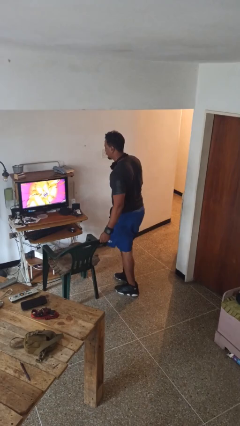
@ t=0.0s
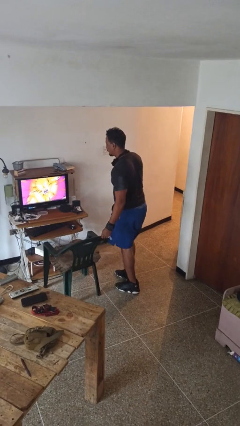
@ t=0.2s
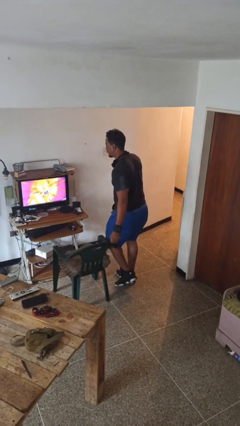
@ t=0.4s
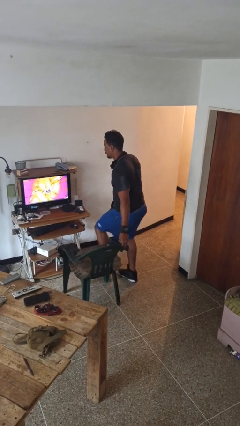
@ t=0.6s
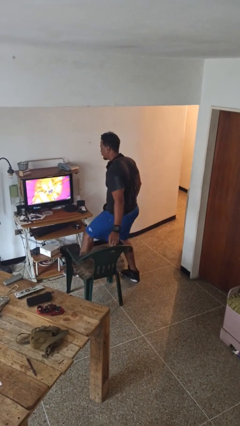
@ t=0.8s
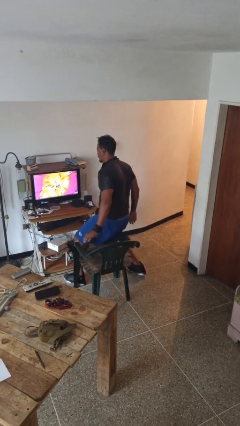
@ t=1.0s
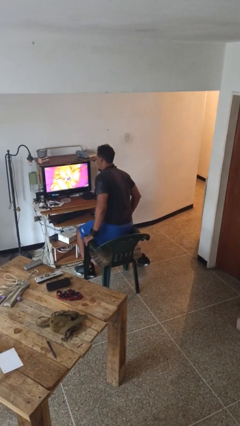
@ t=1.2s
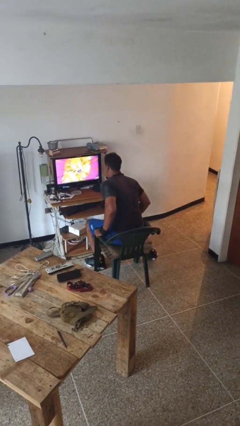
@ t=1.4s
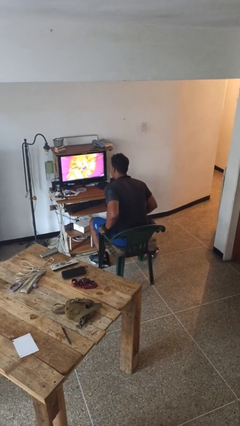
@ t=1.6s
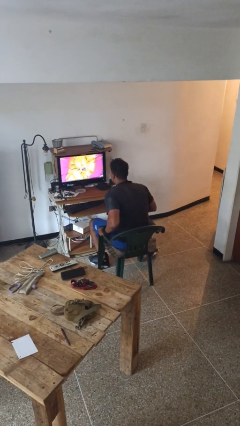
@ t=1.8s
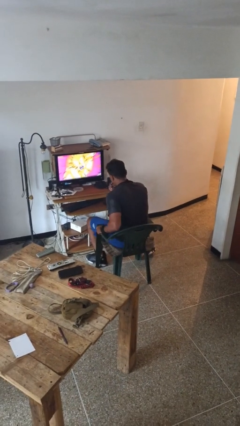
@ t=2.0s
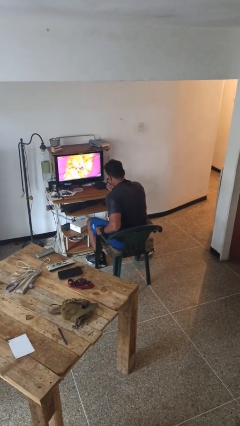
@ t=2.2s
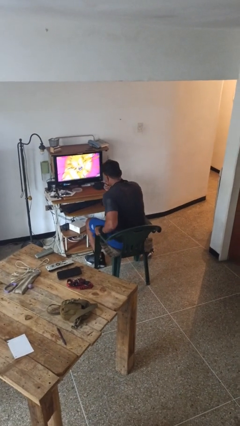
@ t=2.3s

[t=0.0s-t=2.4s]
person sits down

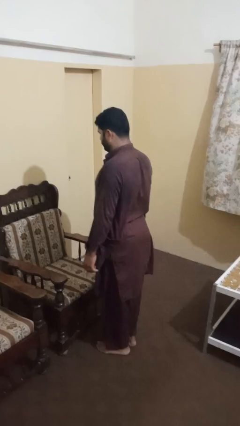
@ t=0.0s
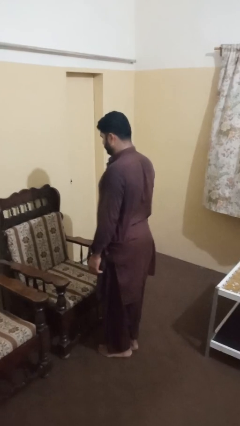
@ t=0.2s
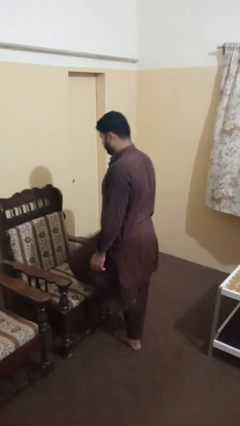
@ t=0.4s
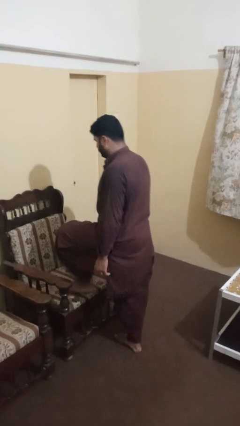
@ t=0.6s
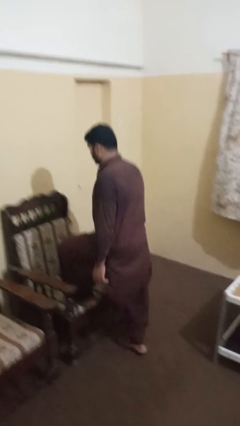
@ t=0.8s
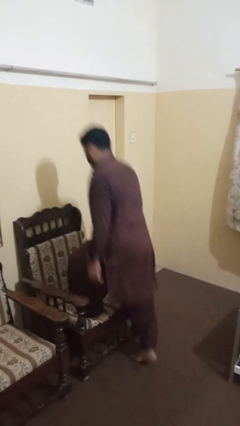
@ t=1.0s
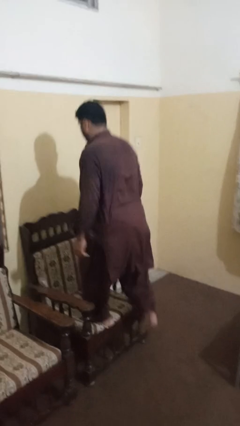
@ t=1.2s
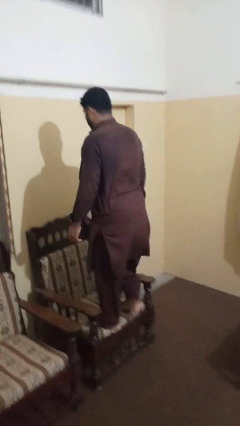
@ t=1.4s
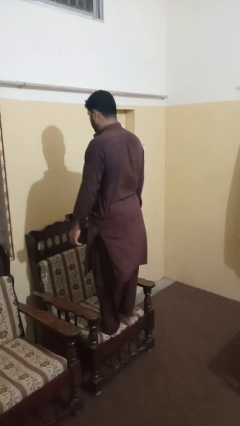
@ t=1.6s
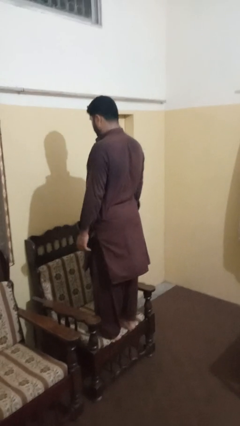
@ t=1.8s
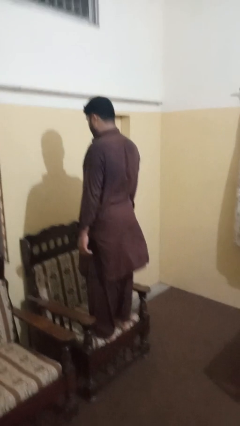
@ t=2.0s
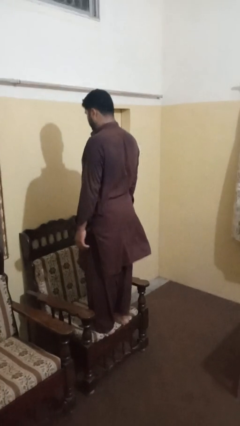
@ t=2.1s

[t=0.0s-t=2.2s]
person climbs on chair

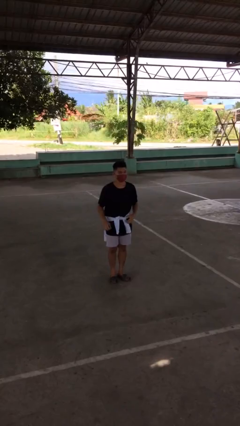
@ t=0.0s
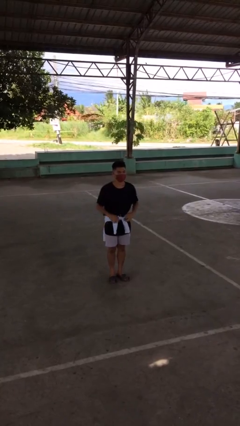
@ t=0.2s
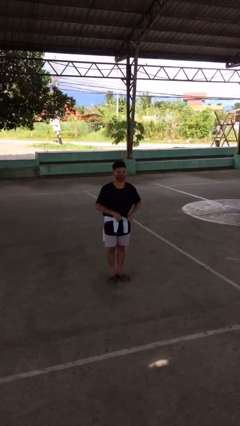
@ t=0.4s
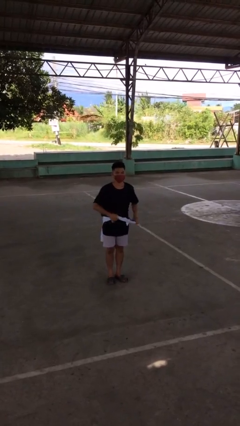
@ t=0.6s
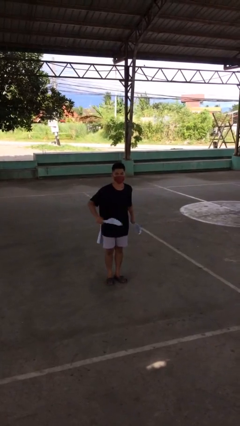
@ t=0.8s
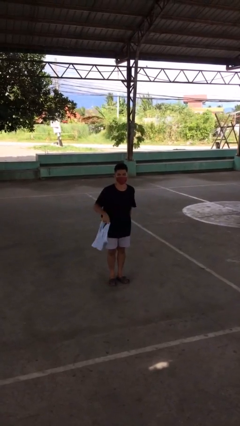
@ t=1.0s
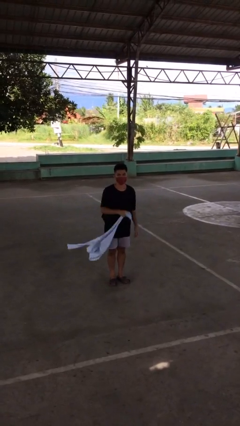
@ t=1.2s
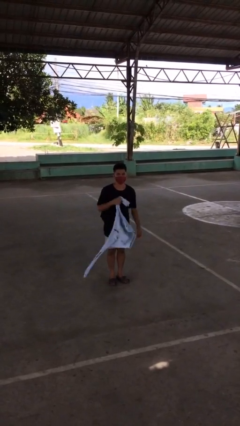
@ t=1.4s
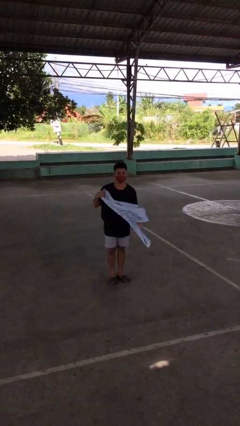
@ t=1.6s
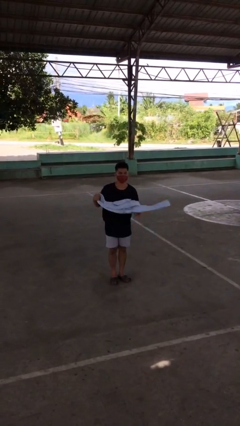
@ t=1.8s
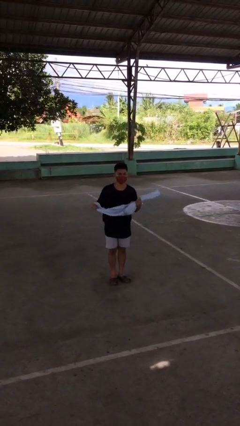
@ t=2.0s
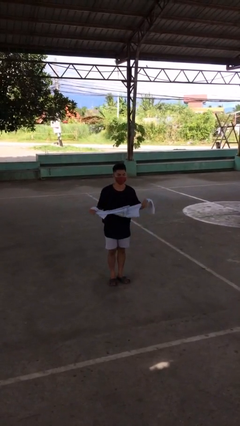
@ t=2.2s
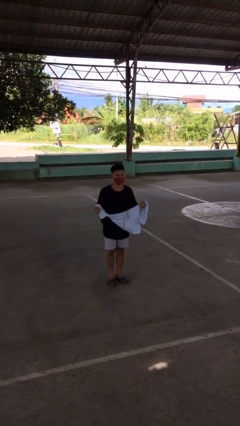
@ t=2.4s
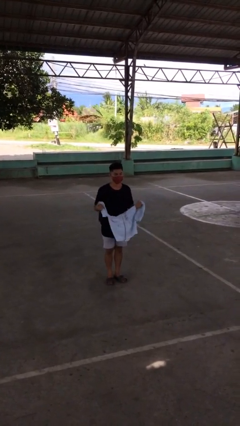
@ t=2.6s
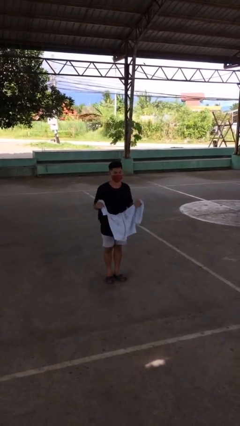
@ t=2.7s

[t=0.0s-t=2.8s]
person unties jacket around waist

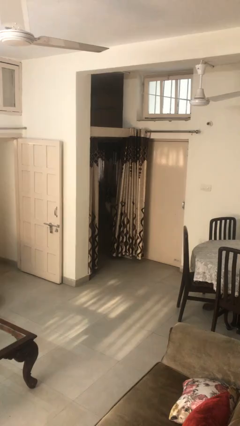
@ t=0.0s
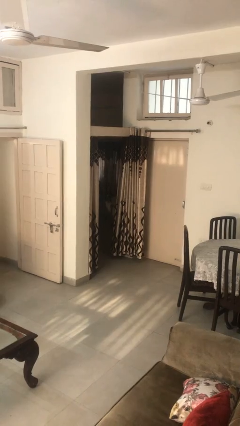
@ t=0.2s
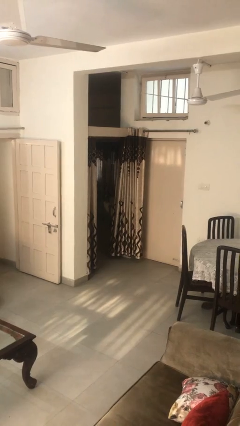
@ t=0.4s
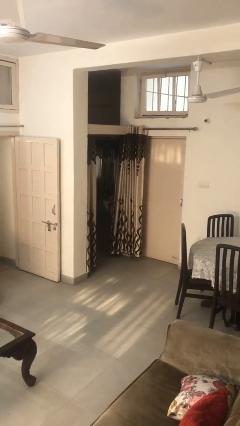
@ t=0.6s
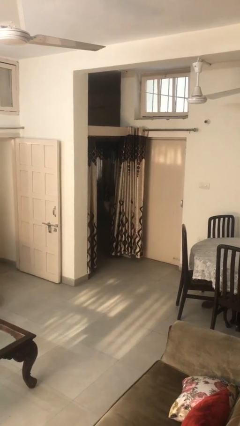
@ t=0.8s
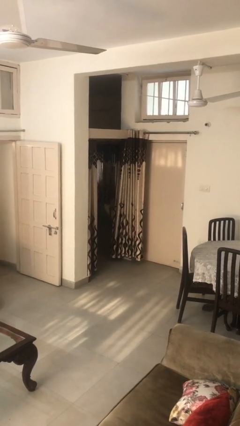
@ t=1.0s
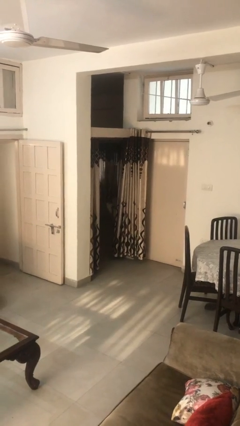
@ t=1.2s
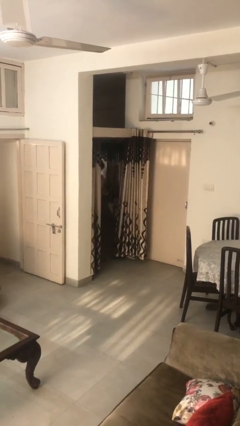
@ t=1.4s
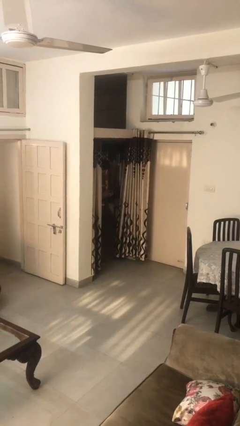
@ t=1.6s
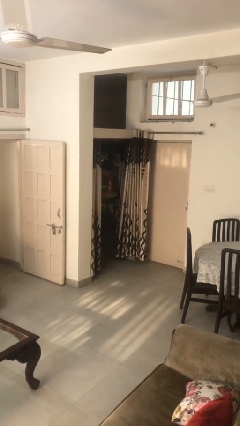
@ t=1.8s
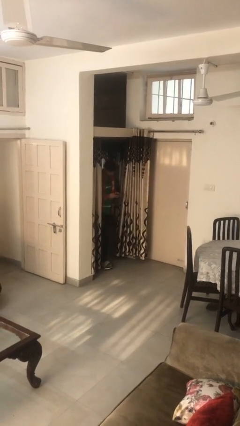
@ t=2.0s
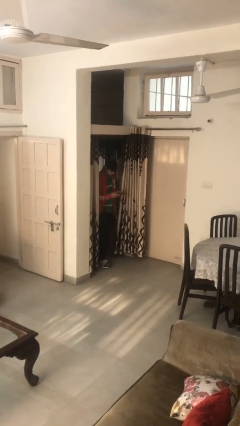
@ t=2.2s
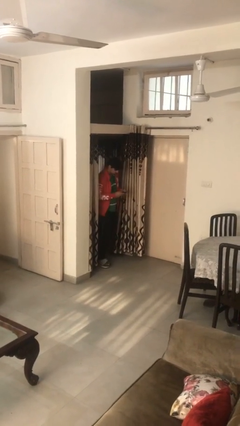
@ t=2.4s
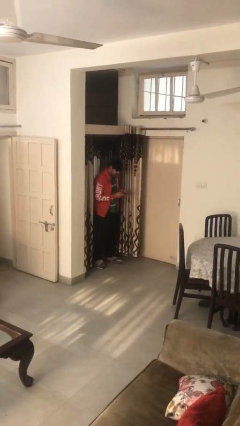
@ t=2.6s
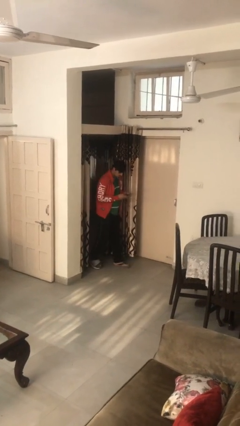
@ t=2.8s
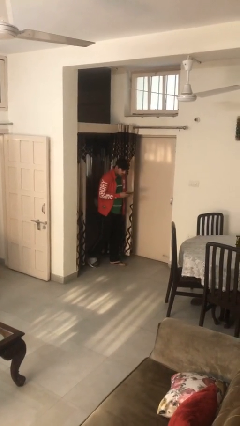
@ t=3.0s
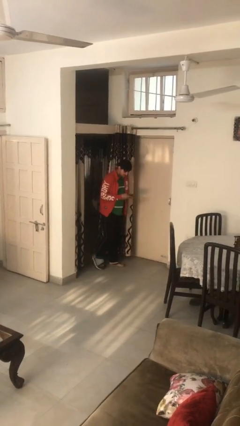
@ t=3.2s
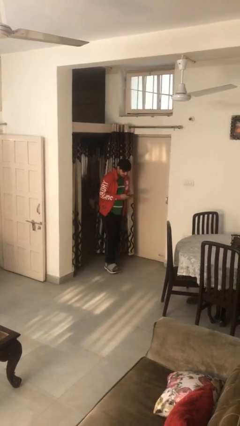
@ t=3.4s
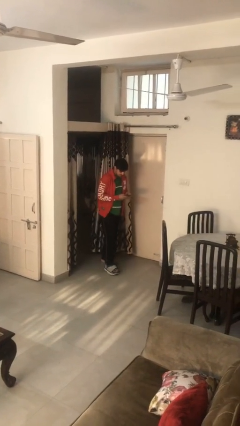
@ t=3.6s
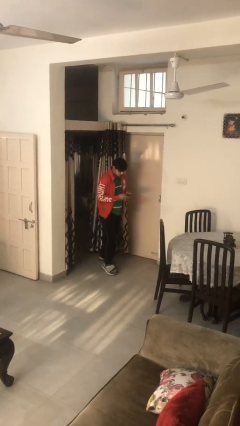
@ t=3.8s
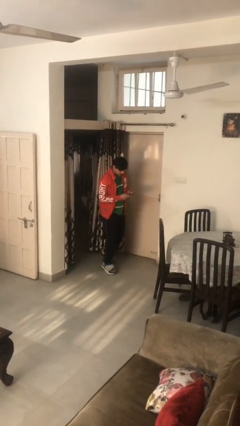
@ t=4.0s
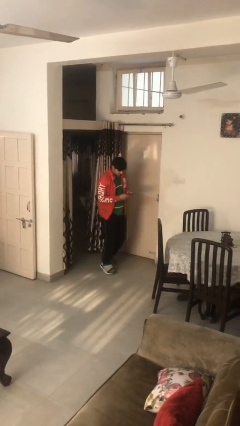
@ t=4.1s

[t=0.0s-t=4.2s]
person enters scene through structure

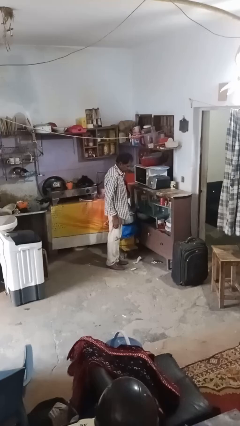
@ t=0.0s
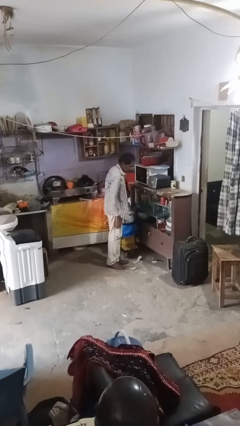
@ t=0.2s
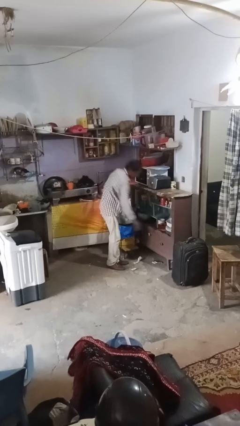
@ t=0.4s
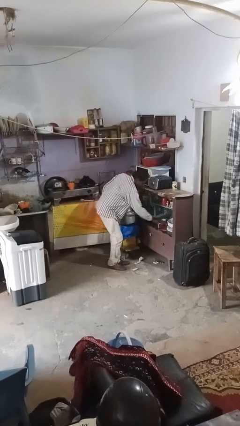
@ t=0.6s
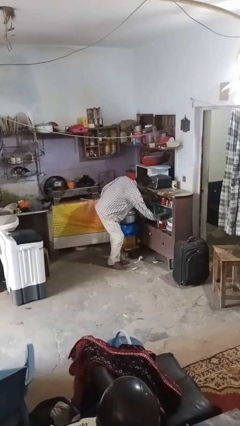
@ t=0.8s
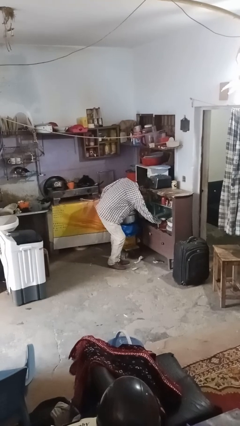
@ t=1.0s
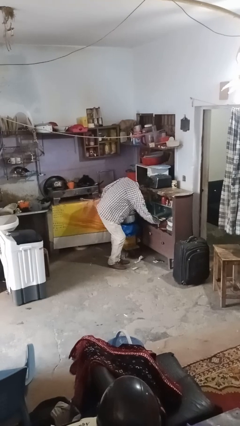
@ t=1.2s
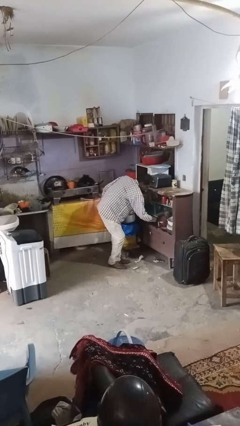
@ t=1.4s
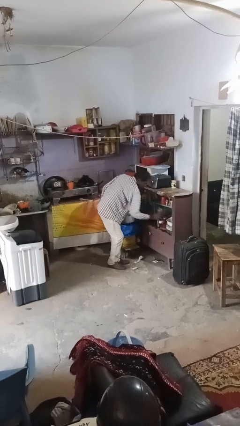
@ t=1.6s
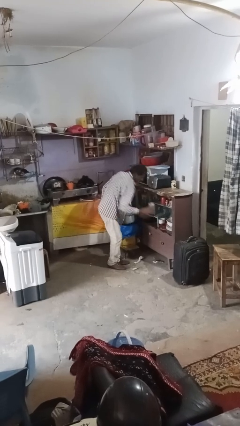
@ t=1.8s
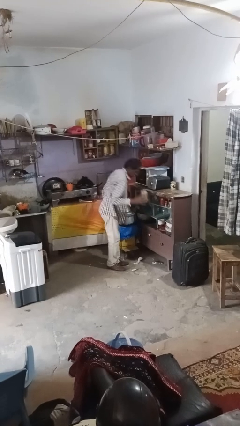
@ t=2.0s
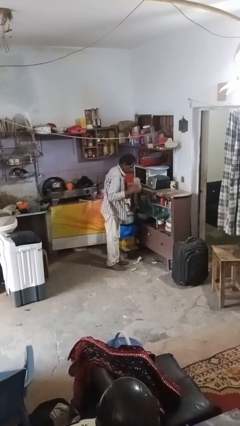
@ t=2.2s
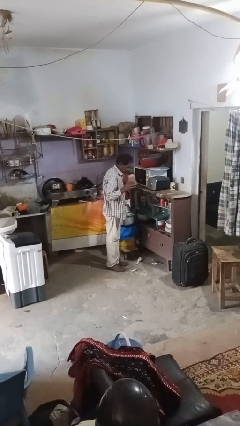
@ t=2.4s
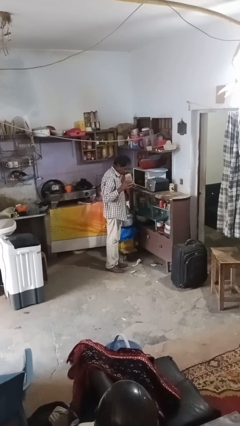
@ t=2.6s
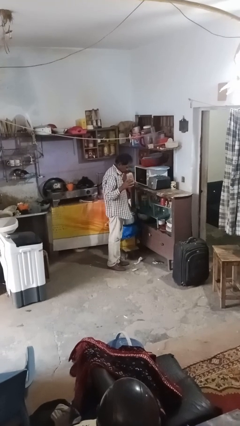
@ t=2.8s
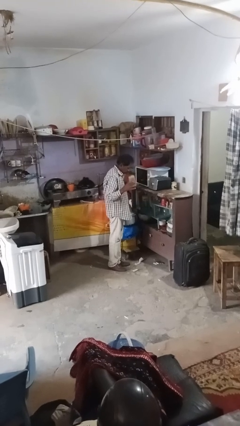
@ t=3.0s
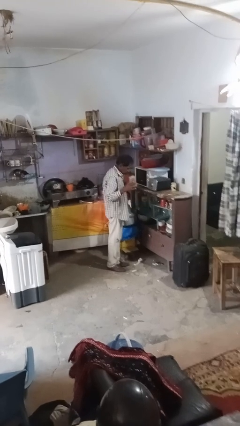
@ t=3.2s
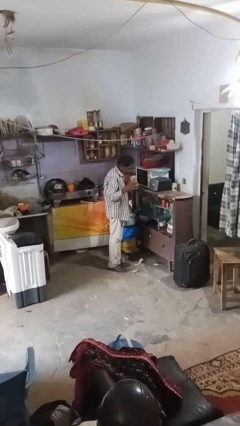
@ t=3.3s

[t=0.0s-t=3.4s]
person takes object from kitchen drawer

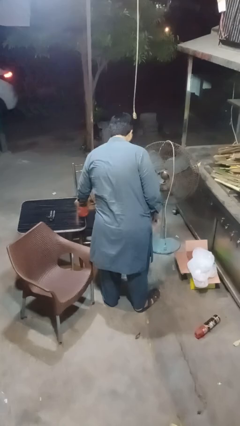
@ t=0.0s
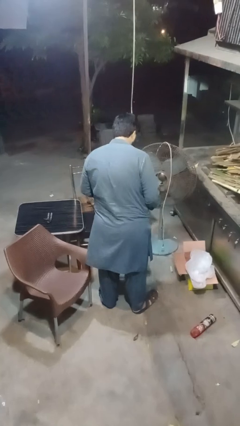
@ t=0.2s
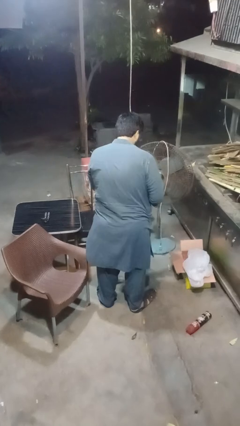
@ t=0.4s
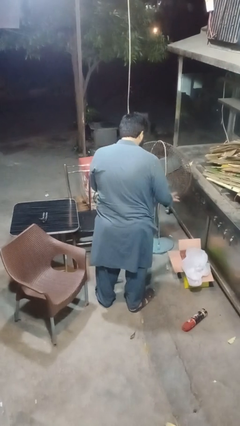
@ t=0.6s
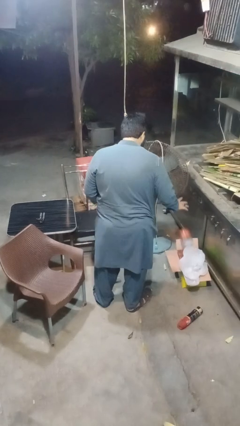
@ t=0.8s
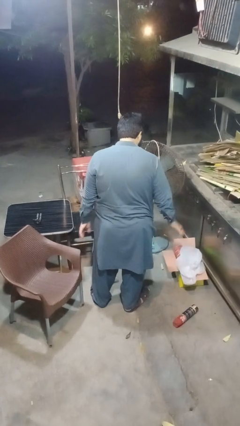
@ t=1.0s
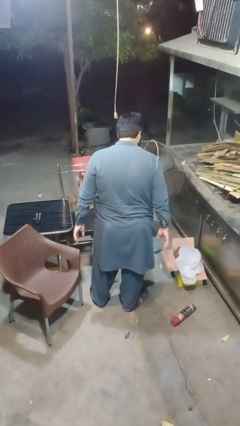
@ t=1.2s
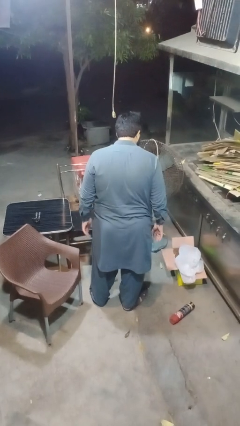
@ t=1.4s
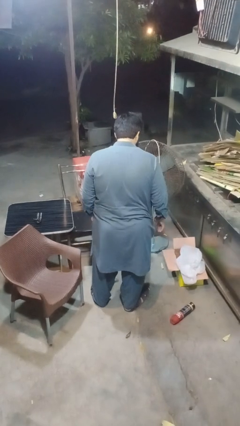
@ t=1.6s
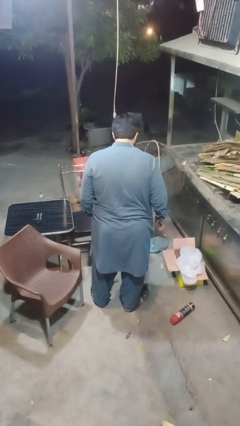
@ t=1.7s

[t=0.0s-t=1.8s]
person discards trash

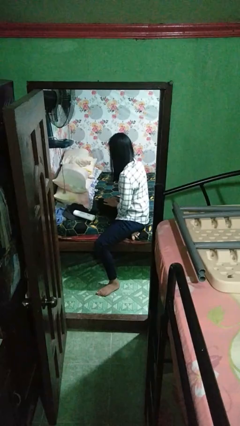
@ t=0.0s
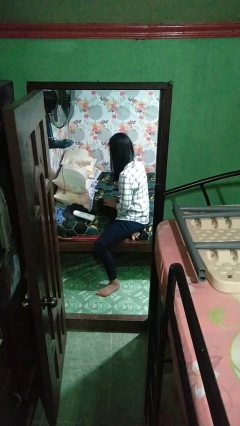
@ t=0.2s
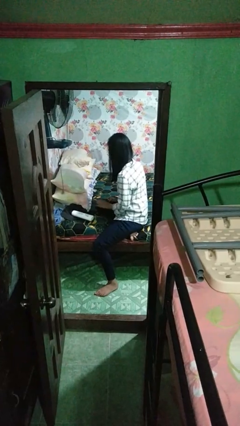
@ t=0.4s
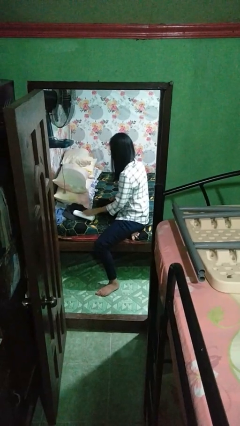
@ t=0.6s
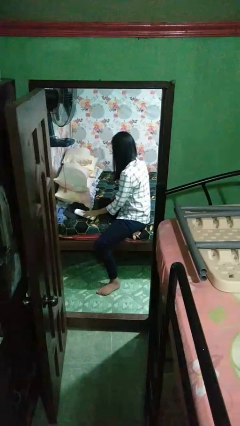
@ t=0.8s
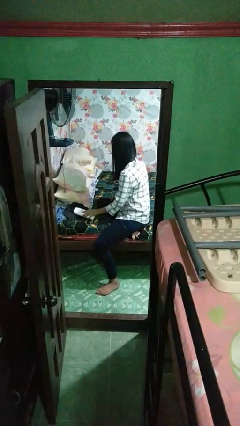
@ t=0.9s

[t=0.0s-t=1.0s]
person picks up object from bed
